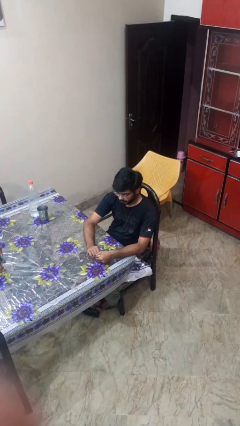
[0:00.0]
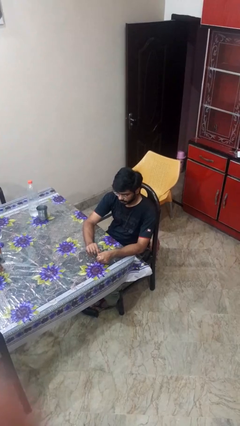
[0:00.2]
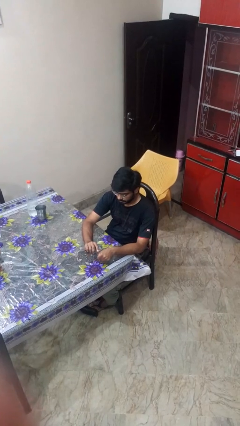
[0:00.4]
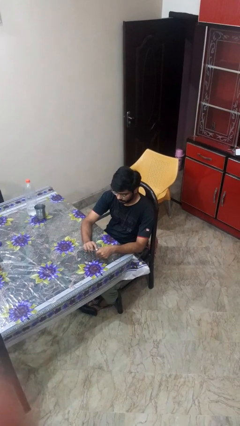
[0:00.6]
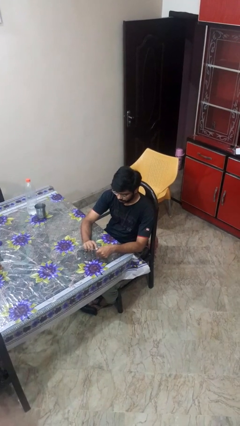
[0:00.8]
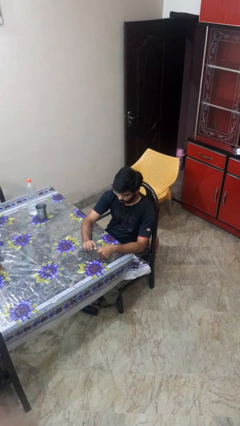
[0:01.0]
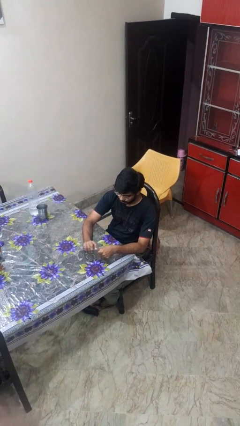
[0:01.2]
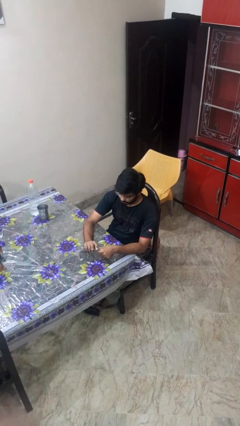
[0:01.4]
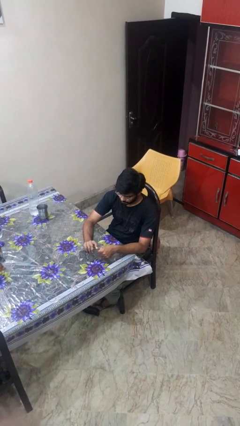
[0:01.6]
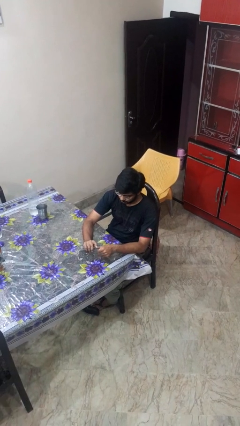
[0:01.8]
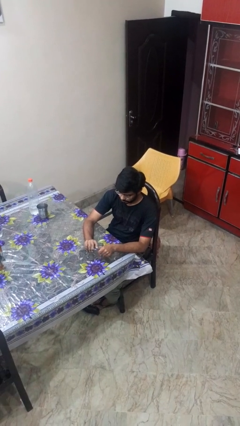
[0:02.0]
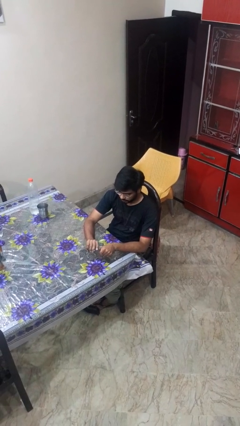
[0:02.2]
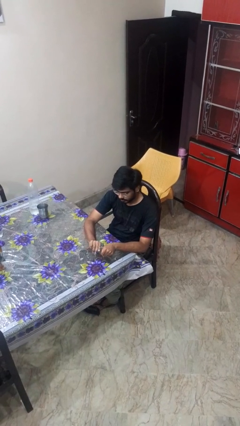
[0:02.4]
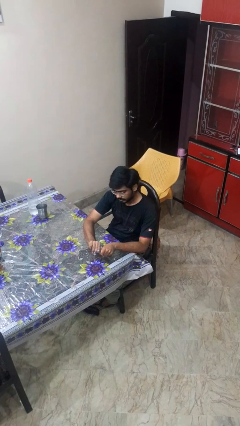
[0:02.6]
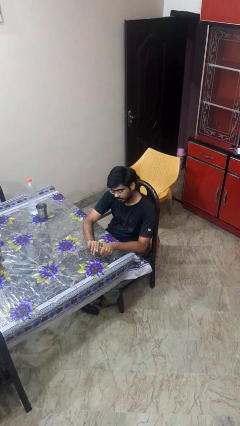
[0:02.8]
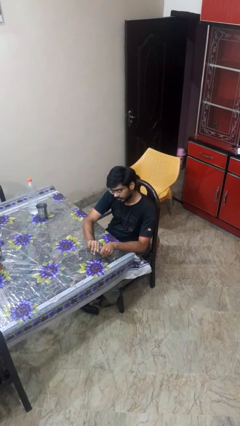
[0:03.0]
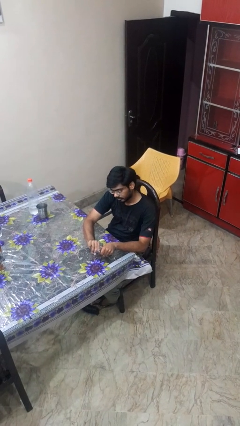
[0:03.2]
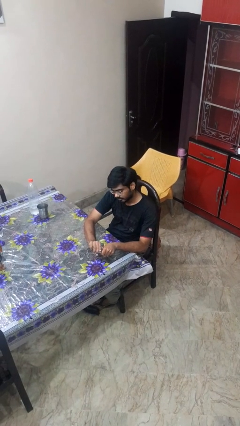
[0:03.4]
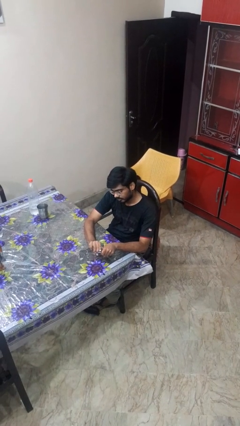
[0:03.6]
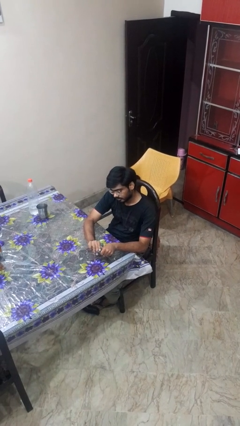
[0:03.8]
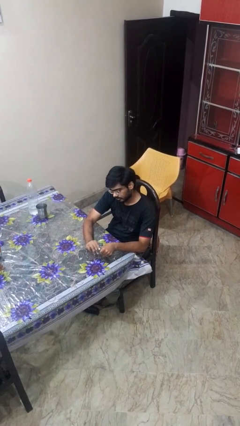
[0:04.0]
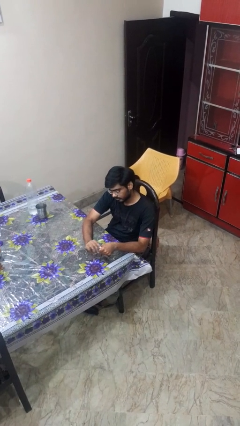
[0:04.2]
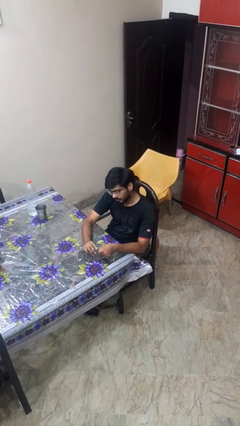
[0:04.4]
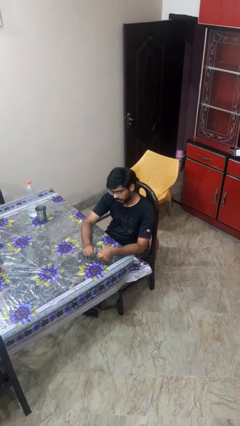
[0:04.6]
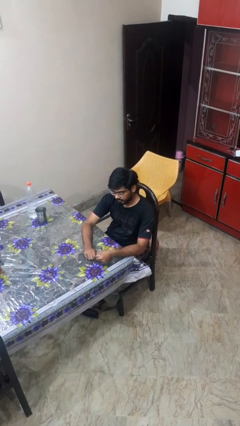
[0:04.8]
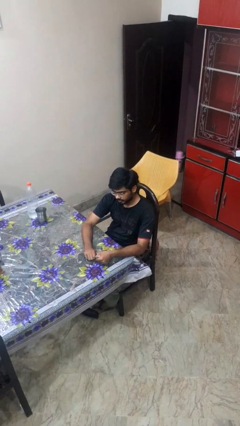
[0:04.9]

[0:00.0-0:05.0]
person files fingernails

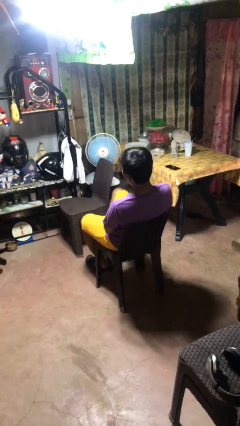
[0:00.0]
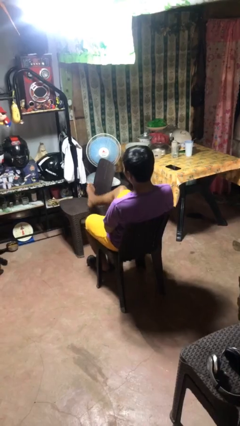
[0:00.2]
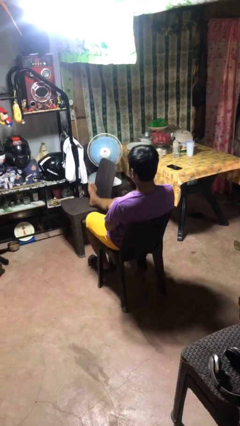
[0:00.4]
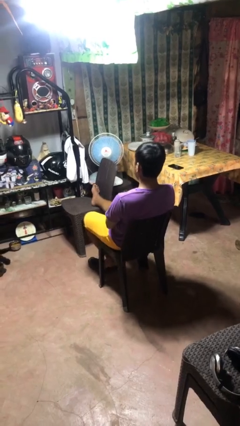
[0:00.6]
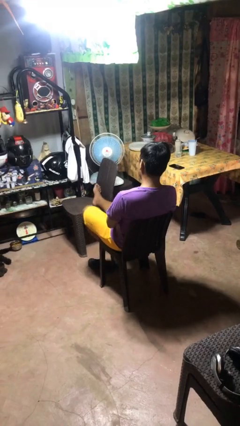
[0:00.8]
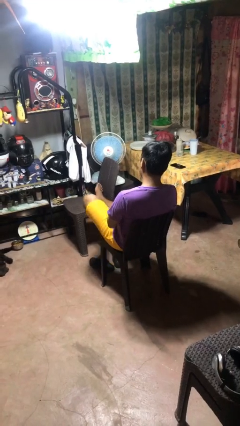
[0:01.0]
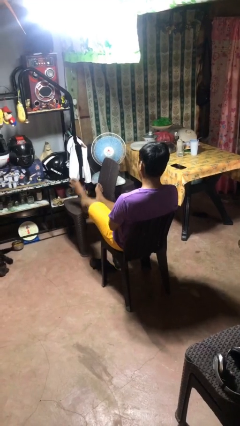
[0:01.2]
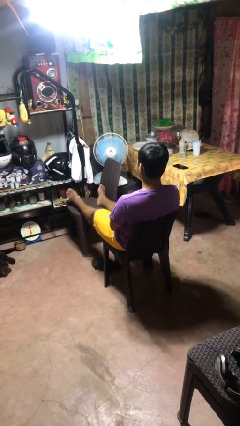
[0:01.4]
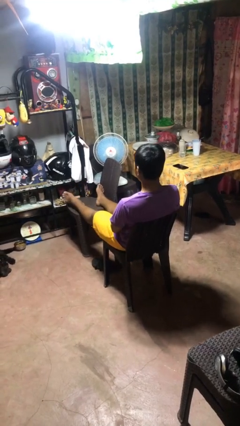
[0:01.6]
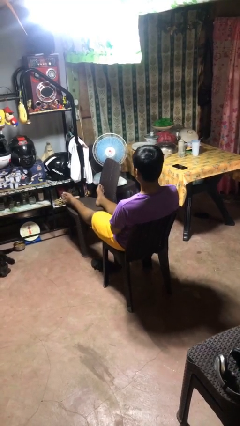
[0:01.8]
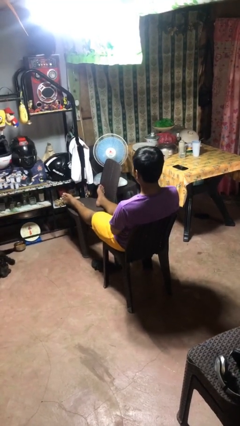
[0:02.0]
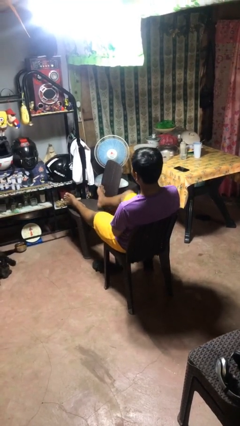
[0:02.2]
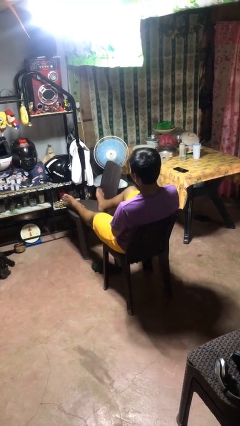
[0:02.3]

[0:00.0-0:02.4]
person puts feet up

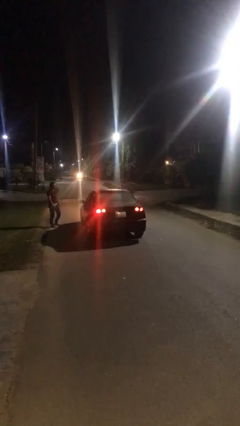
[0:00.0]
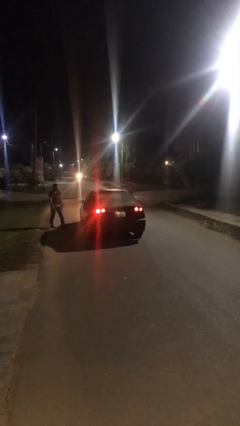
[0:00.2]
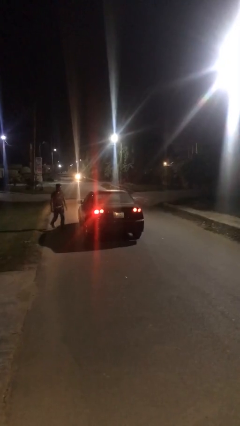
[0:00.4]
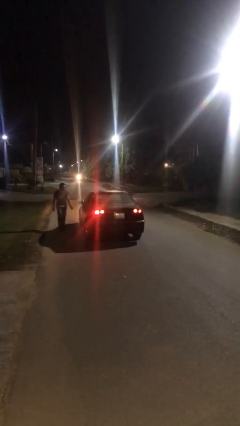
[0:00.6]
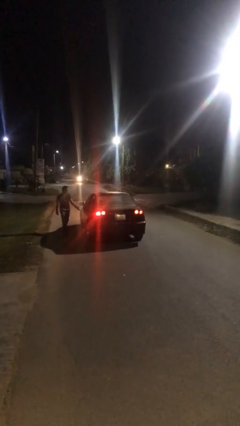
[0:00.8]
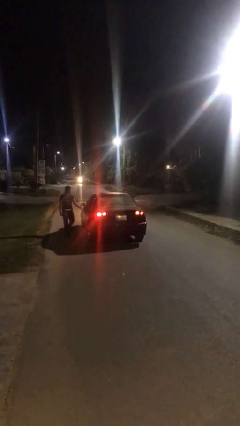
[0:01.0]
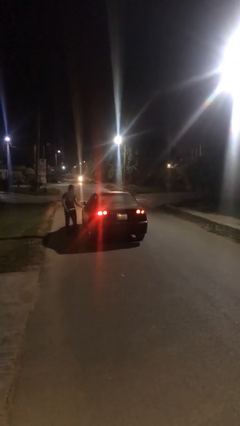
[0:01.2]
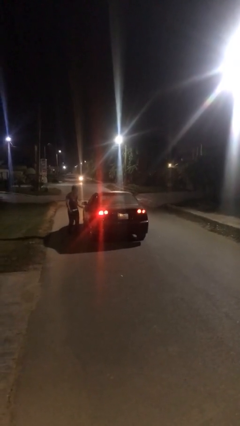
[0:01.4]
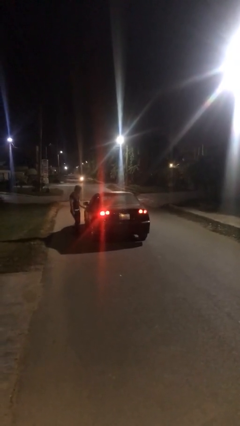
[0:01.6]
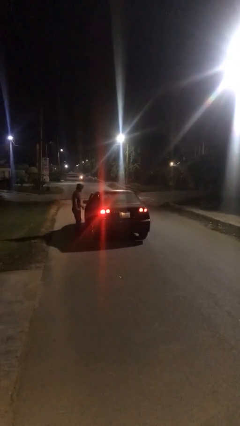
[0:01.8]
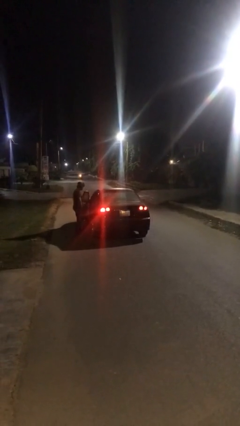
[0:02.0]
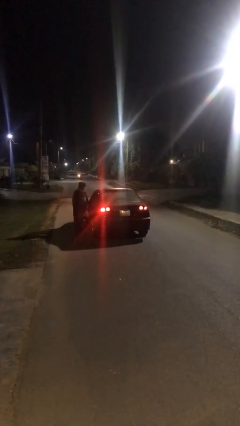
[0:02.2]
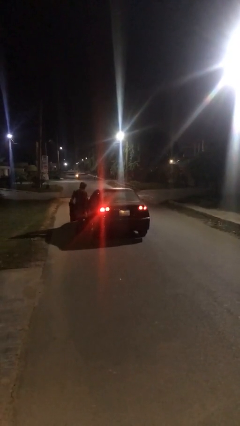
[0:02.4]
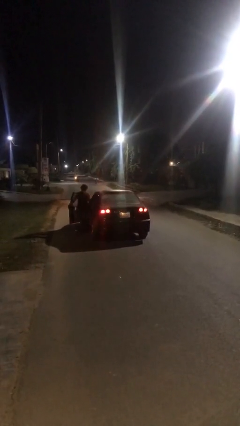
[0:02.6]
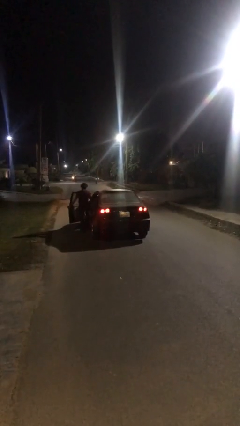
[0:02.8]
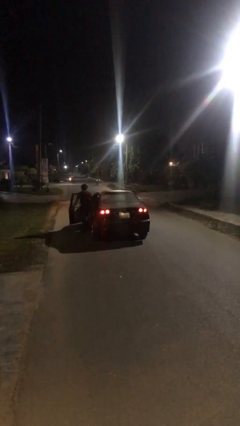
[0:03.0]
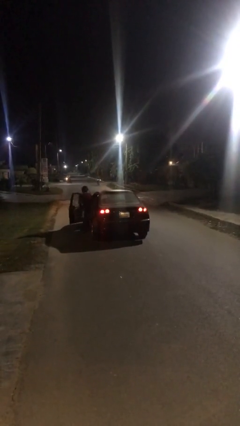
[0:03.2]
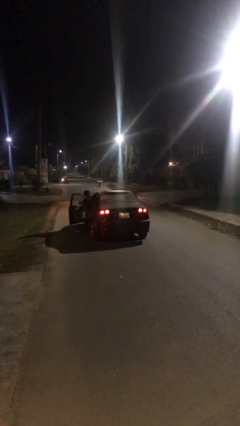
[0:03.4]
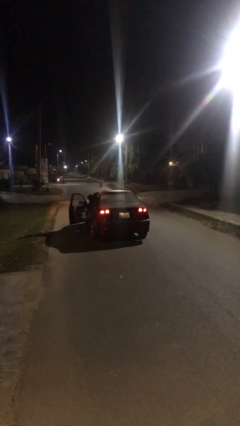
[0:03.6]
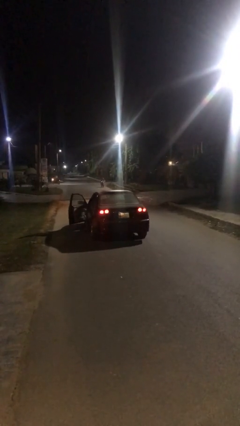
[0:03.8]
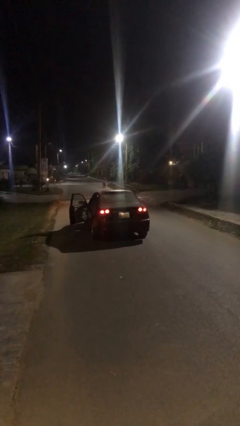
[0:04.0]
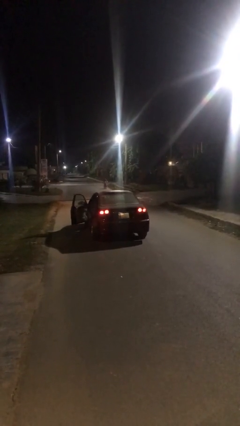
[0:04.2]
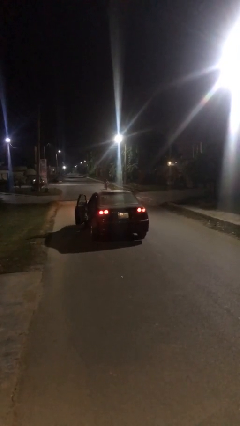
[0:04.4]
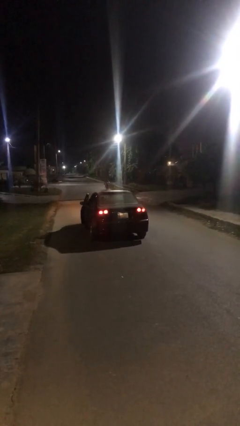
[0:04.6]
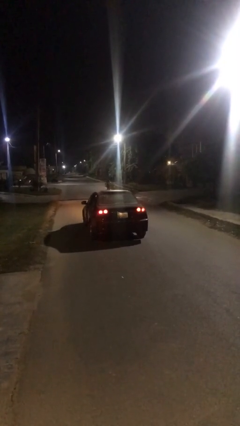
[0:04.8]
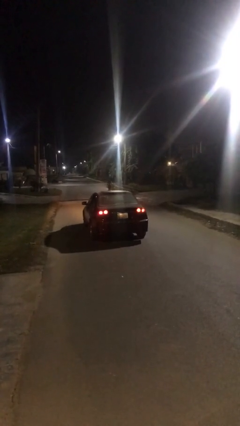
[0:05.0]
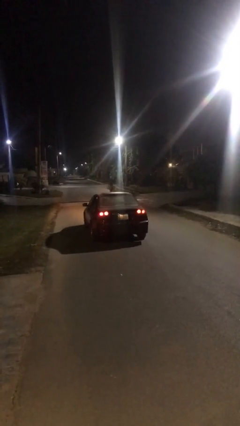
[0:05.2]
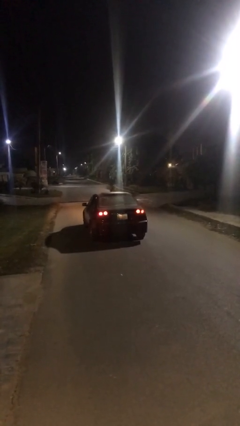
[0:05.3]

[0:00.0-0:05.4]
car picks up person

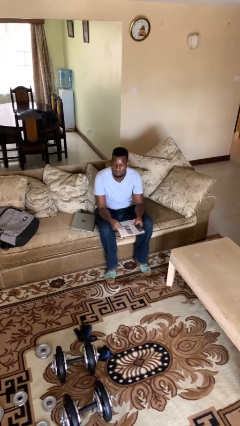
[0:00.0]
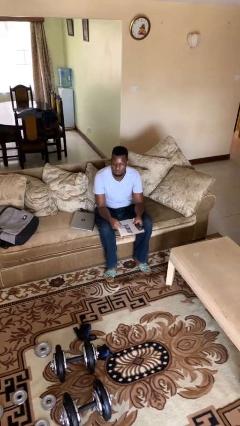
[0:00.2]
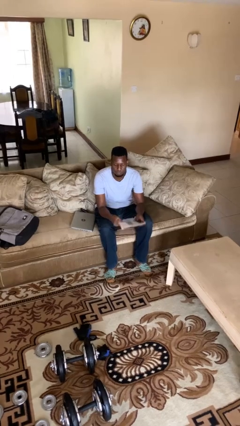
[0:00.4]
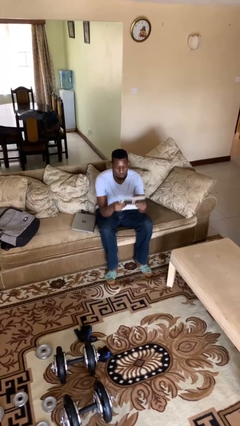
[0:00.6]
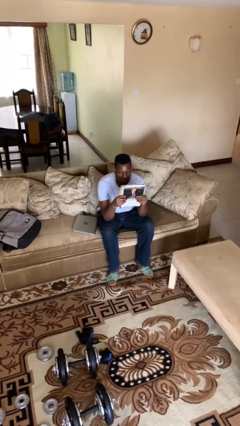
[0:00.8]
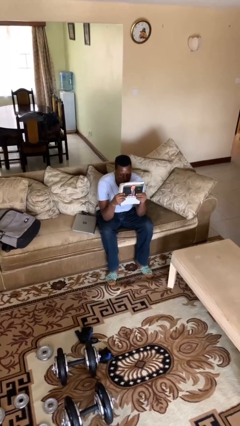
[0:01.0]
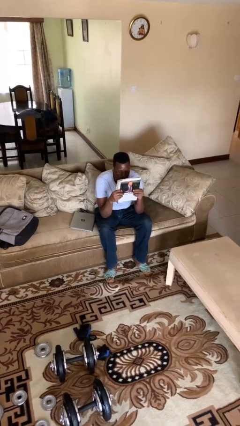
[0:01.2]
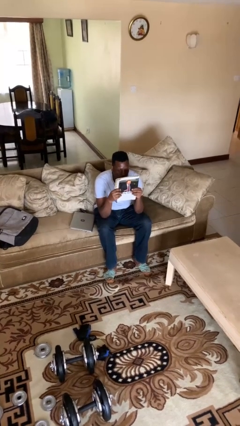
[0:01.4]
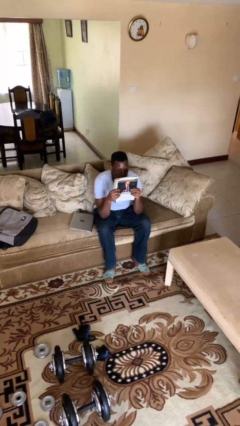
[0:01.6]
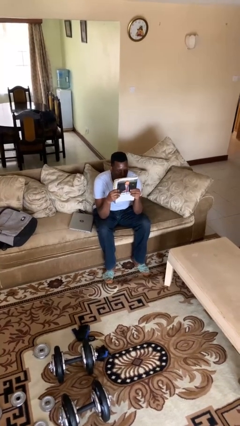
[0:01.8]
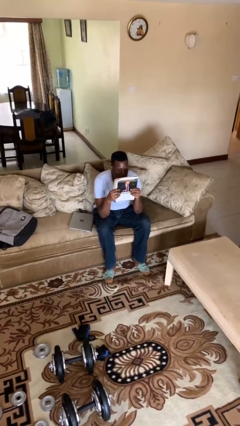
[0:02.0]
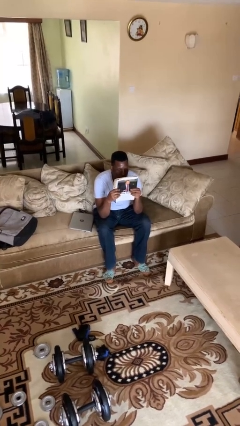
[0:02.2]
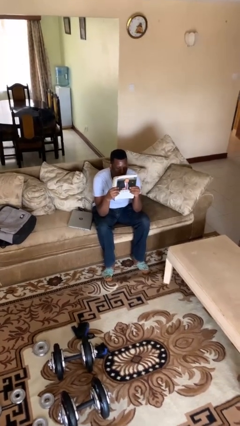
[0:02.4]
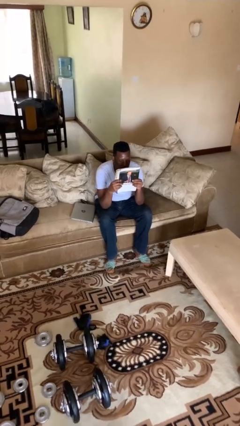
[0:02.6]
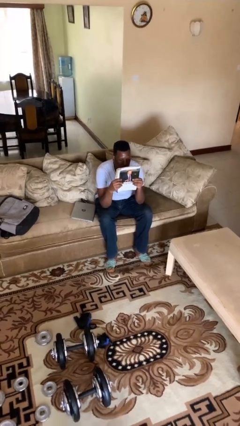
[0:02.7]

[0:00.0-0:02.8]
person reads document

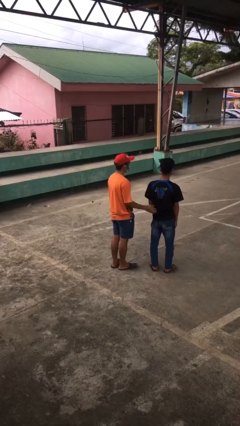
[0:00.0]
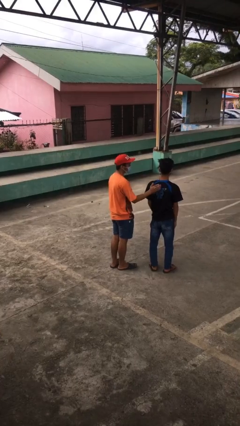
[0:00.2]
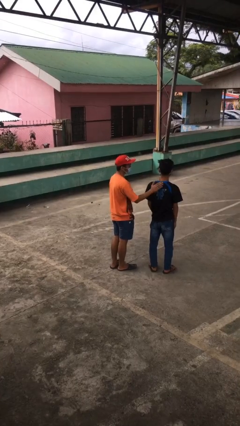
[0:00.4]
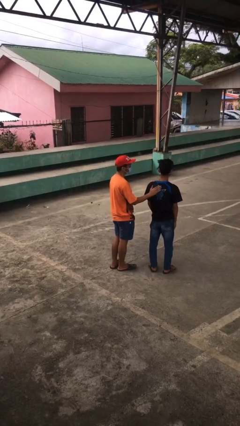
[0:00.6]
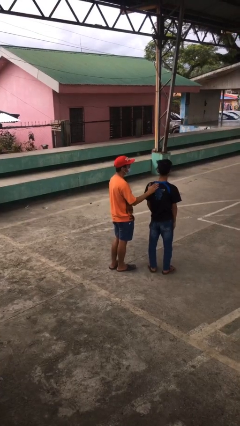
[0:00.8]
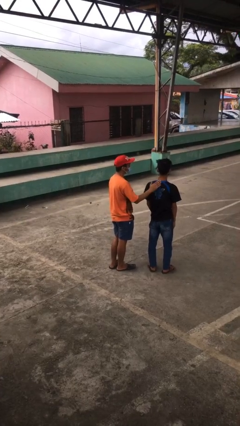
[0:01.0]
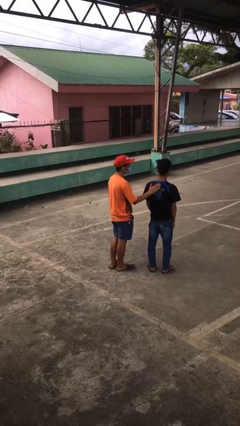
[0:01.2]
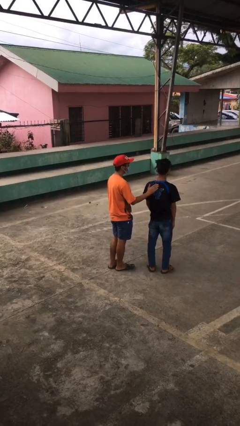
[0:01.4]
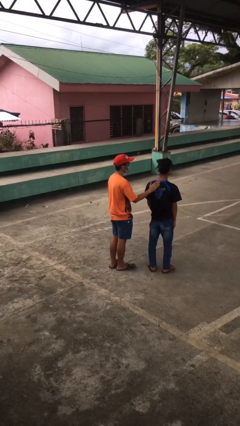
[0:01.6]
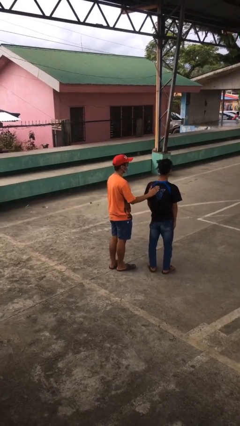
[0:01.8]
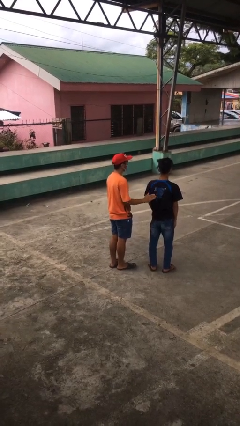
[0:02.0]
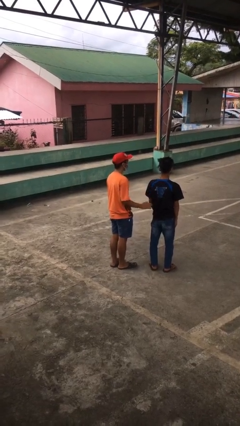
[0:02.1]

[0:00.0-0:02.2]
person touches back of person
